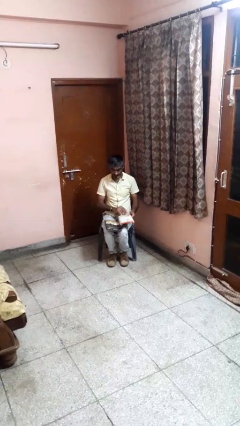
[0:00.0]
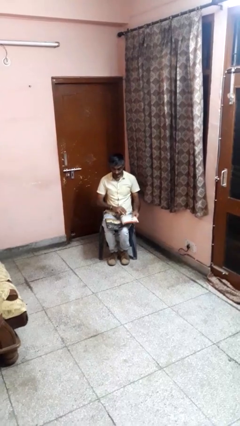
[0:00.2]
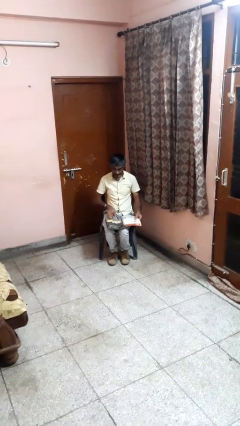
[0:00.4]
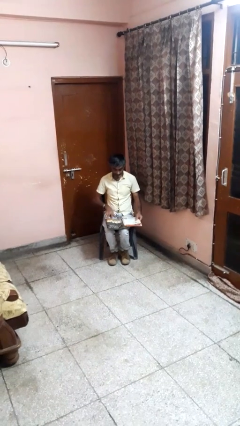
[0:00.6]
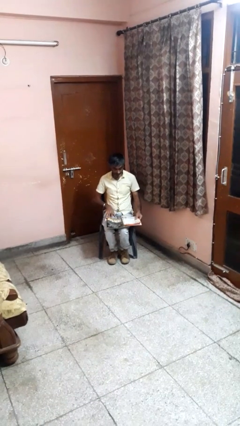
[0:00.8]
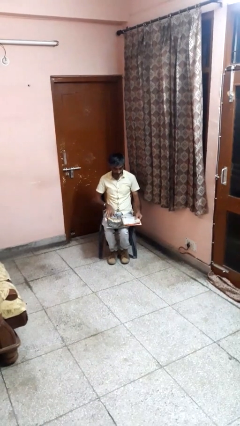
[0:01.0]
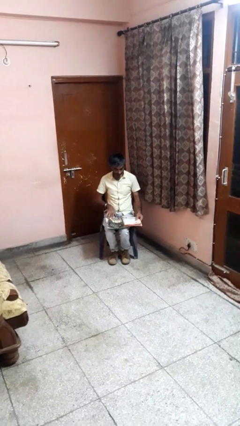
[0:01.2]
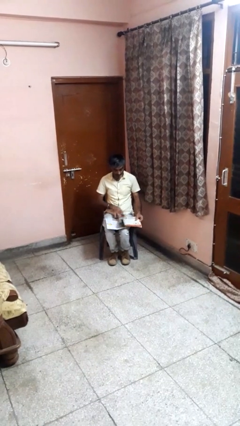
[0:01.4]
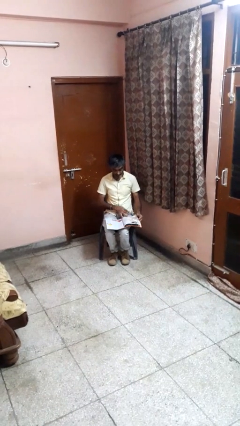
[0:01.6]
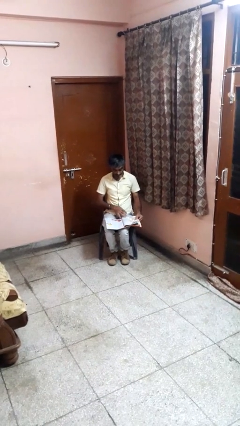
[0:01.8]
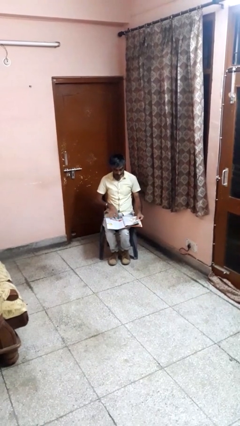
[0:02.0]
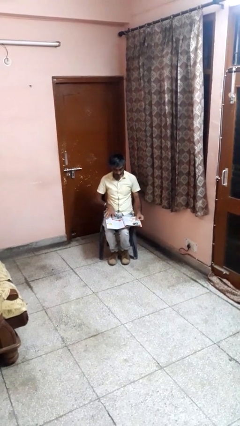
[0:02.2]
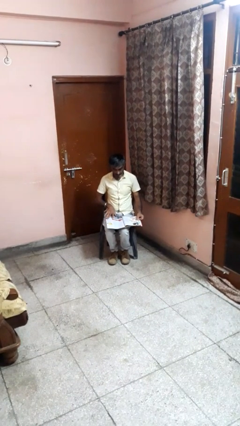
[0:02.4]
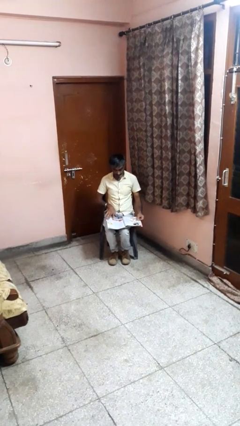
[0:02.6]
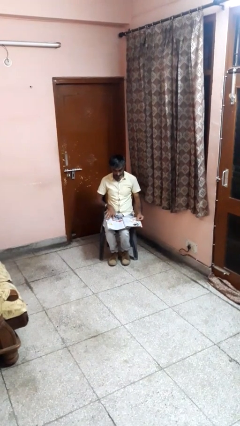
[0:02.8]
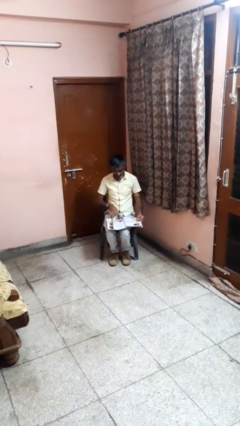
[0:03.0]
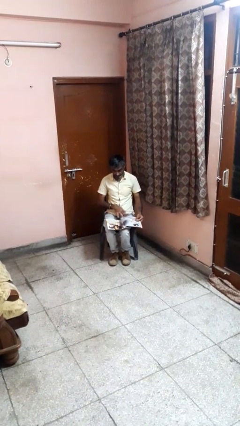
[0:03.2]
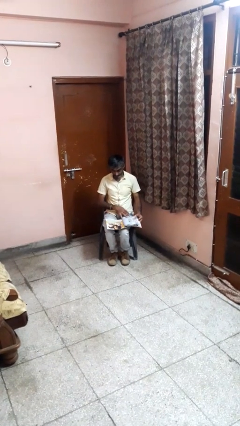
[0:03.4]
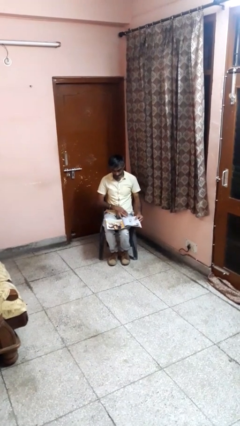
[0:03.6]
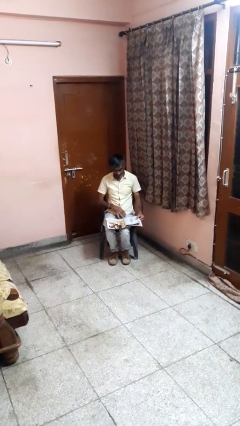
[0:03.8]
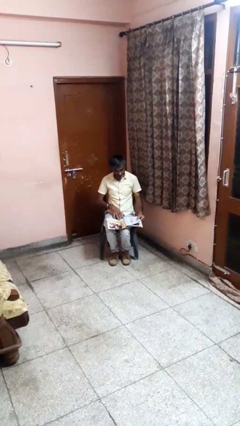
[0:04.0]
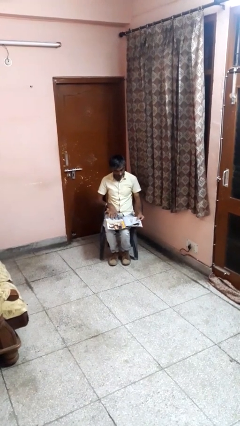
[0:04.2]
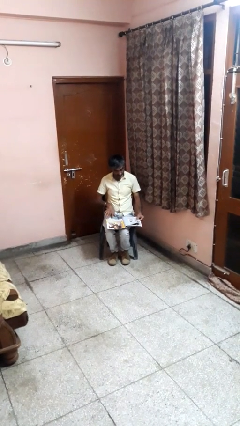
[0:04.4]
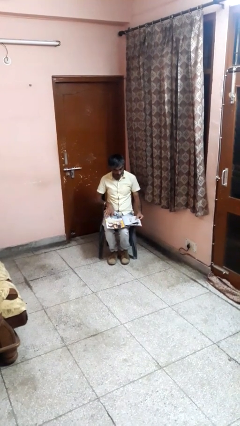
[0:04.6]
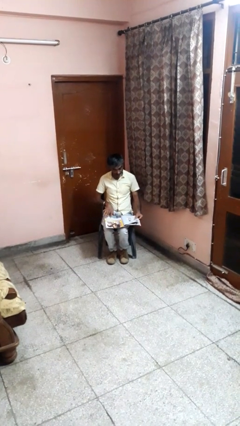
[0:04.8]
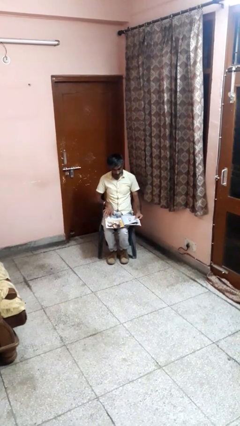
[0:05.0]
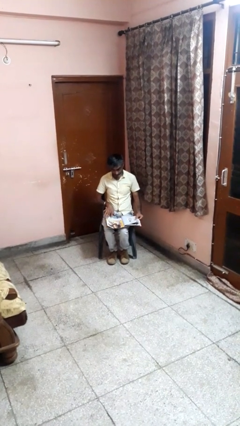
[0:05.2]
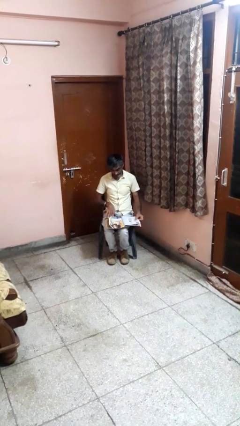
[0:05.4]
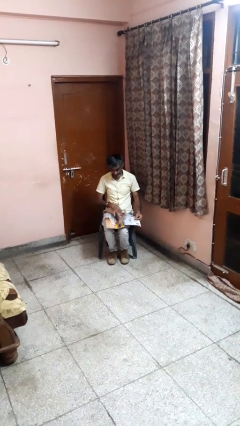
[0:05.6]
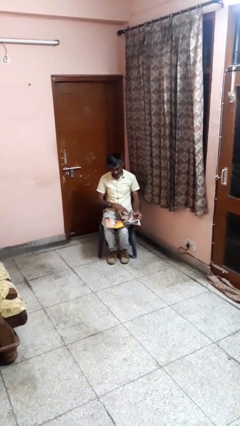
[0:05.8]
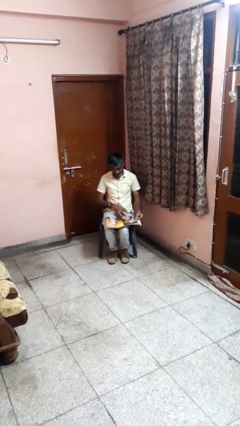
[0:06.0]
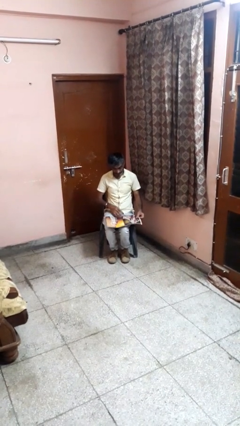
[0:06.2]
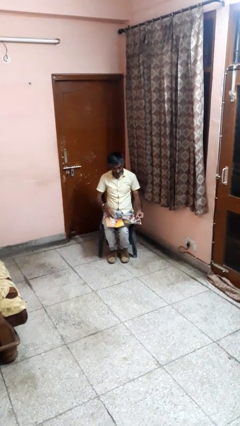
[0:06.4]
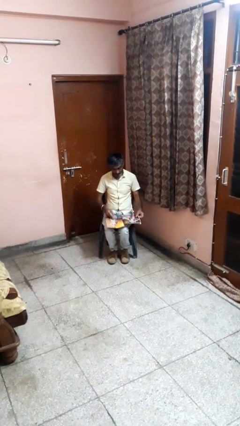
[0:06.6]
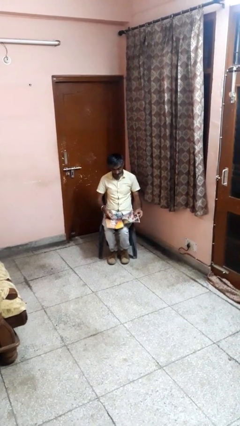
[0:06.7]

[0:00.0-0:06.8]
person reads magazine

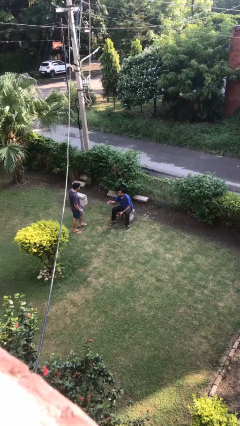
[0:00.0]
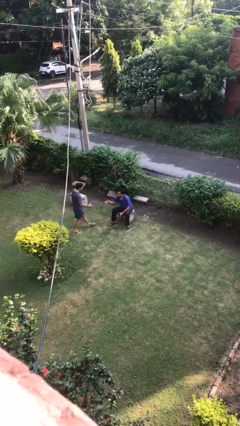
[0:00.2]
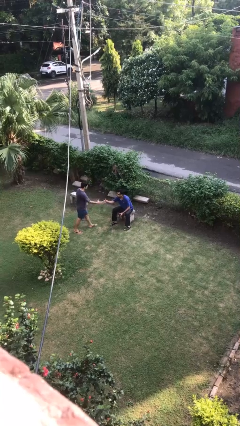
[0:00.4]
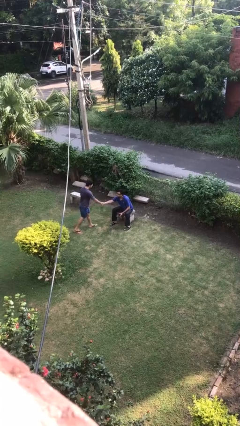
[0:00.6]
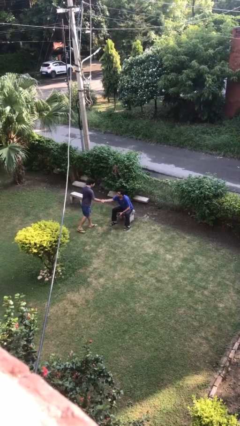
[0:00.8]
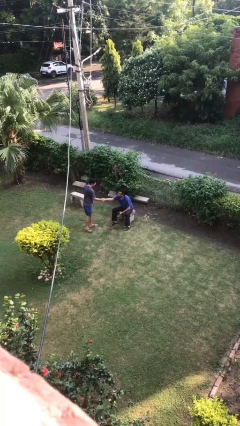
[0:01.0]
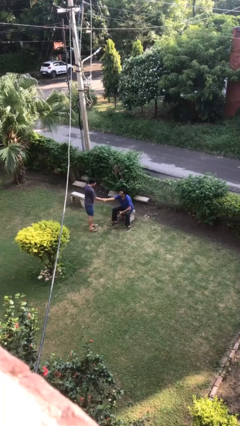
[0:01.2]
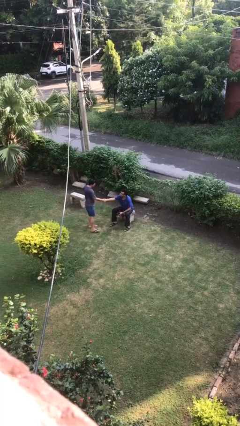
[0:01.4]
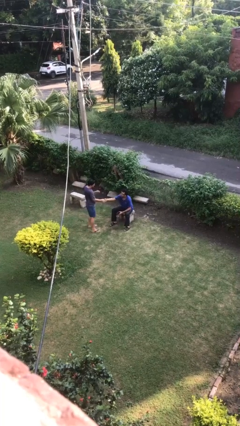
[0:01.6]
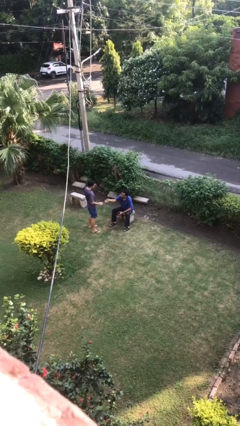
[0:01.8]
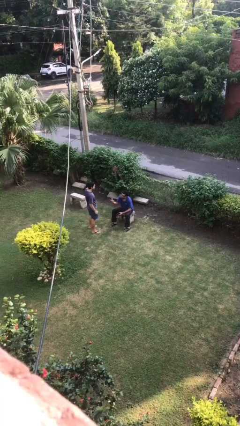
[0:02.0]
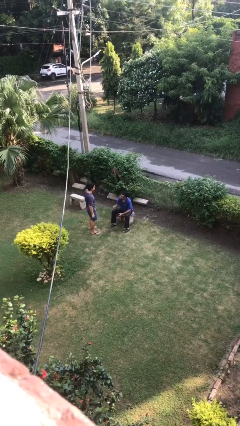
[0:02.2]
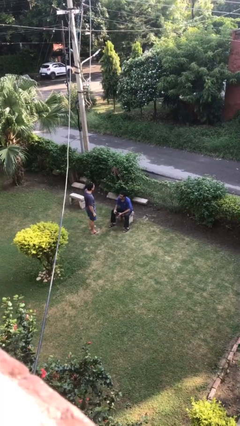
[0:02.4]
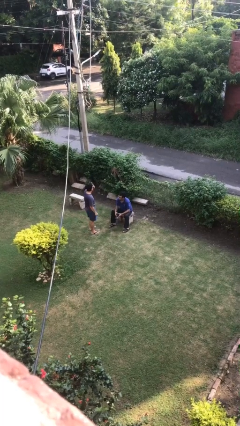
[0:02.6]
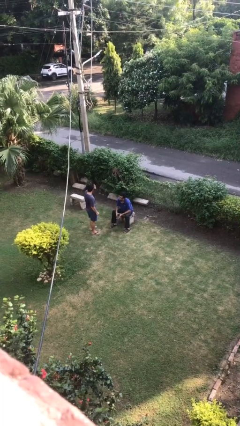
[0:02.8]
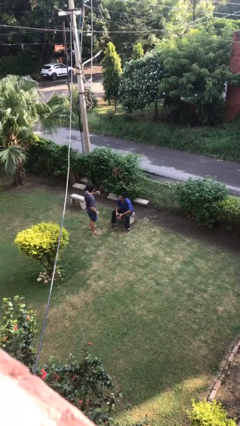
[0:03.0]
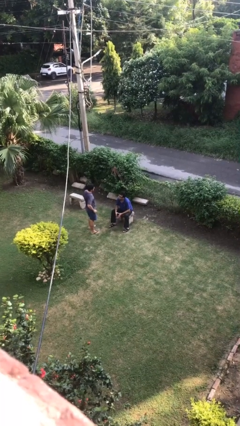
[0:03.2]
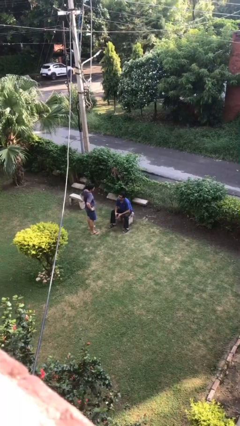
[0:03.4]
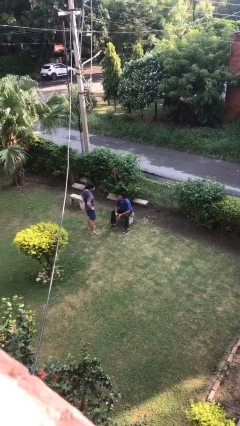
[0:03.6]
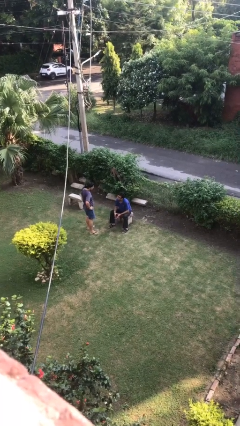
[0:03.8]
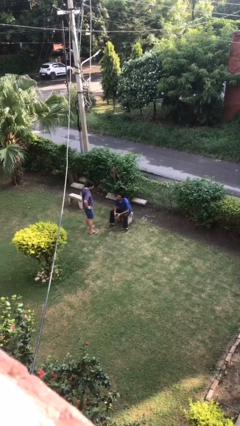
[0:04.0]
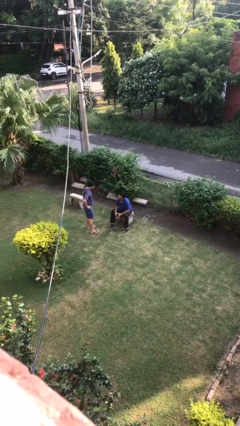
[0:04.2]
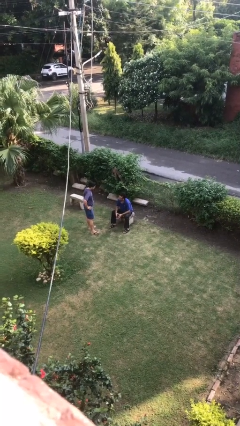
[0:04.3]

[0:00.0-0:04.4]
person shakes hand

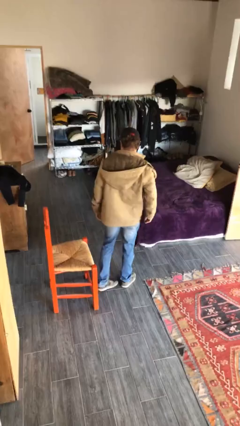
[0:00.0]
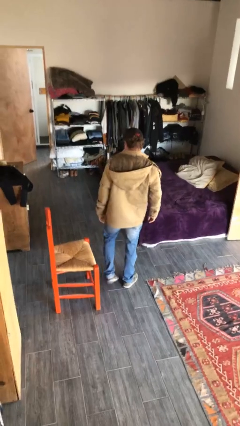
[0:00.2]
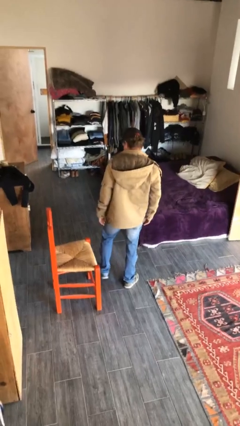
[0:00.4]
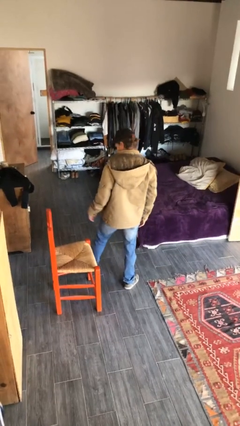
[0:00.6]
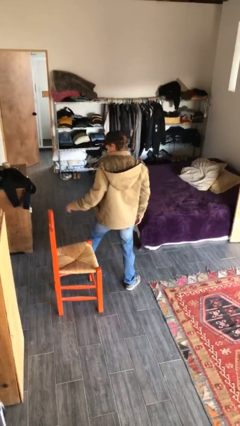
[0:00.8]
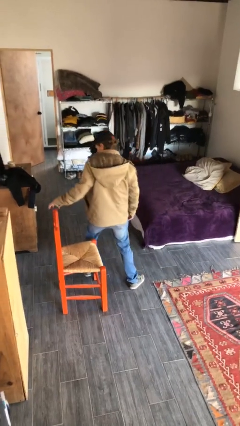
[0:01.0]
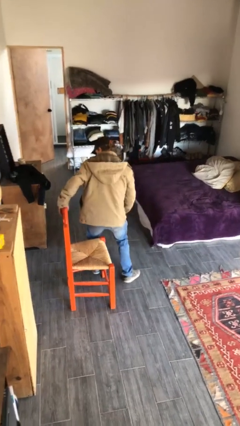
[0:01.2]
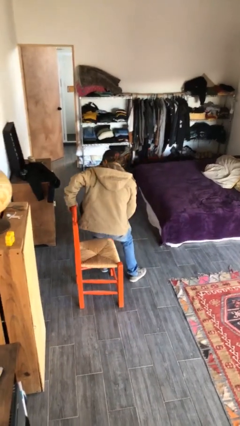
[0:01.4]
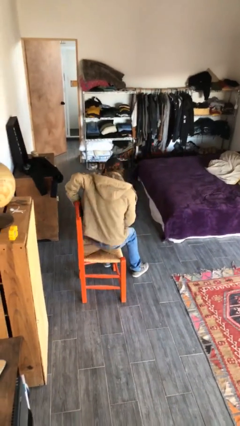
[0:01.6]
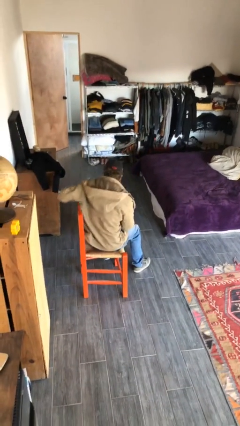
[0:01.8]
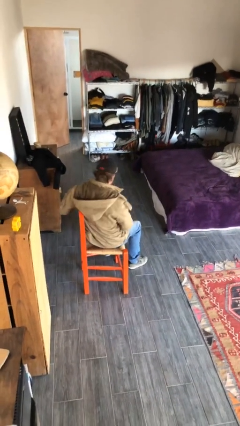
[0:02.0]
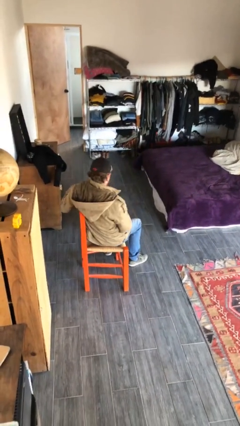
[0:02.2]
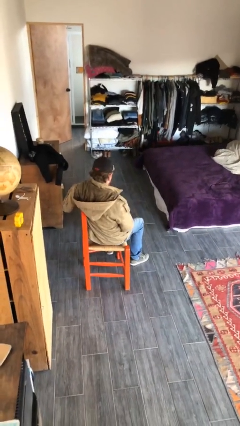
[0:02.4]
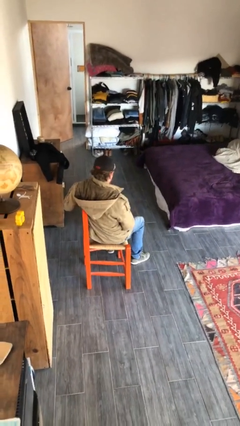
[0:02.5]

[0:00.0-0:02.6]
person sits down

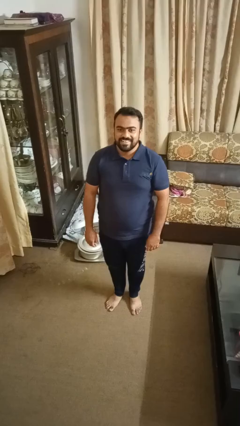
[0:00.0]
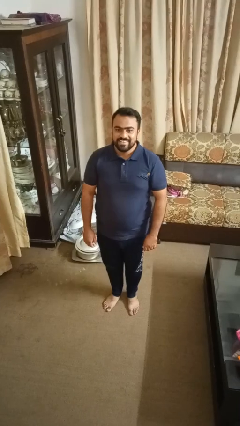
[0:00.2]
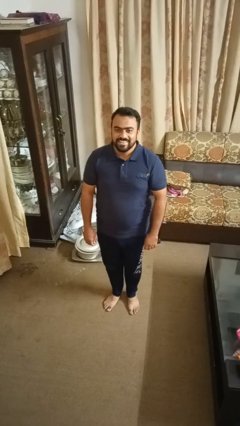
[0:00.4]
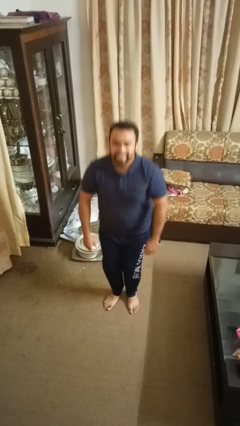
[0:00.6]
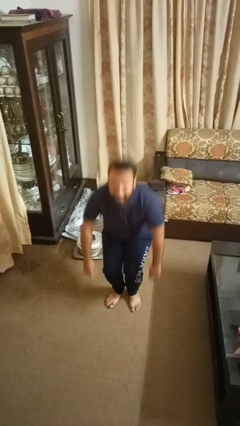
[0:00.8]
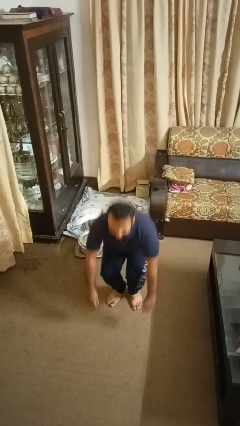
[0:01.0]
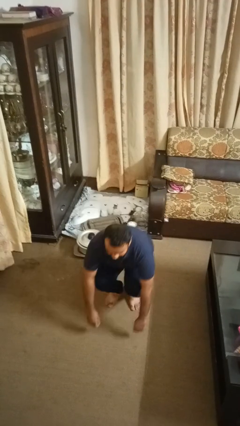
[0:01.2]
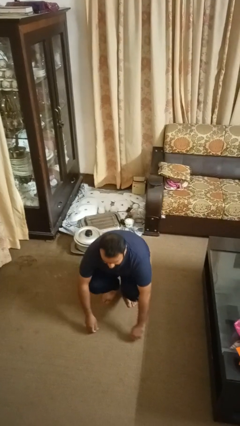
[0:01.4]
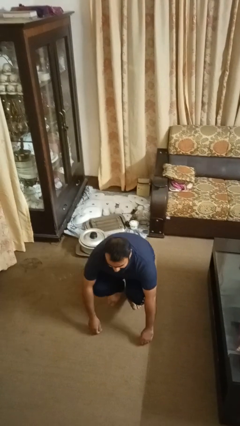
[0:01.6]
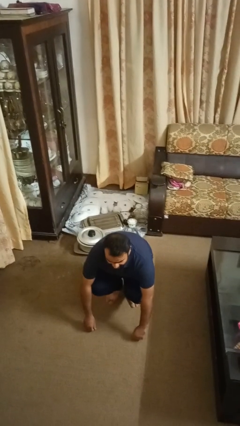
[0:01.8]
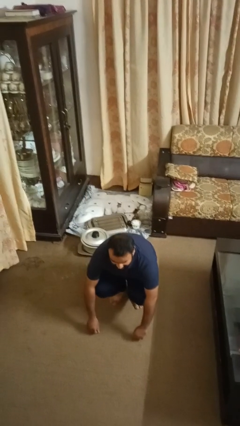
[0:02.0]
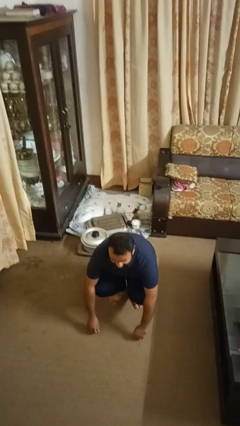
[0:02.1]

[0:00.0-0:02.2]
person squats

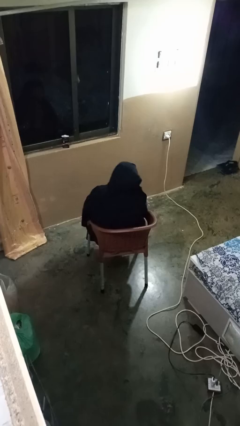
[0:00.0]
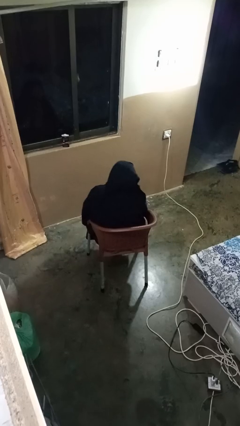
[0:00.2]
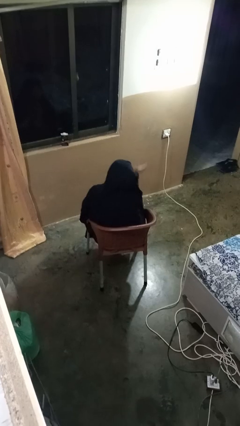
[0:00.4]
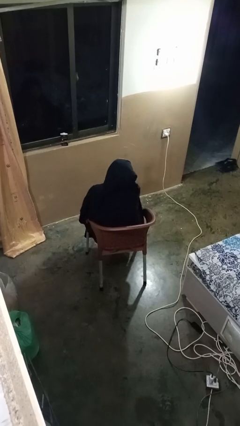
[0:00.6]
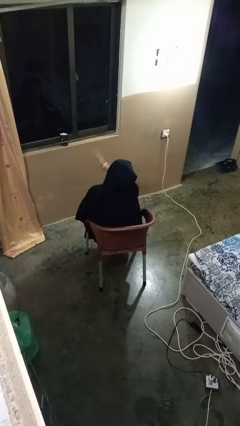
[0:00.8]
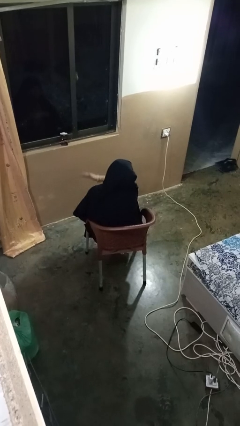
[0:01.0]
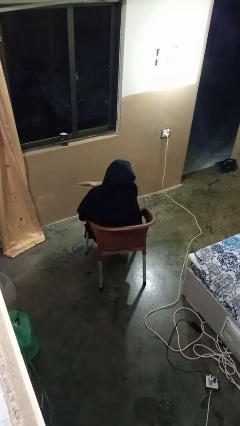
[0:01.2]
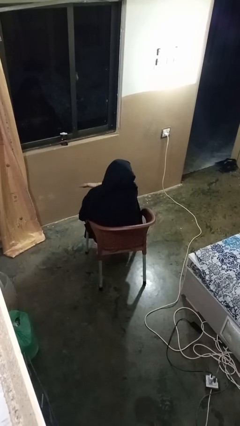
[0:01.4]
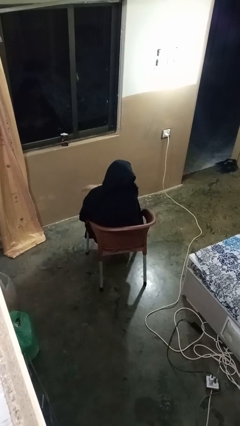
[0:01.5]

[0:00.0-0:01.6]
person gestures swipe left
